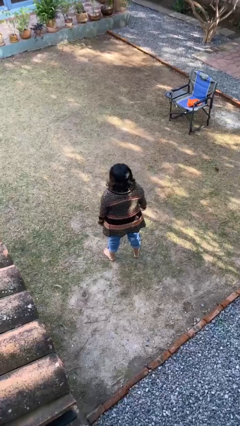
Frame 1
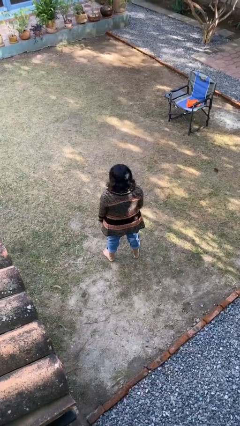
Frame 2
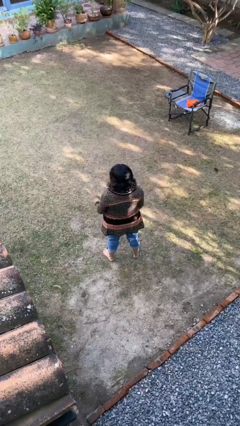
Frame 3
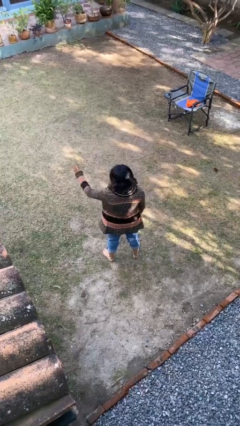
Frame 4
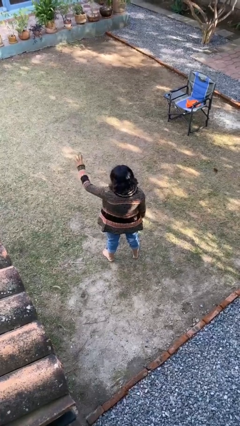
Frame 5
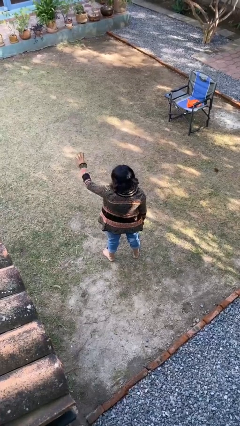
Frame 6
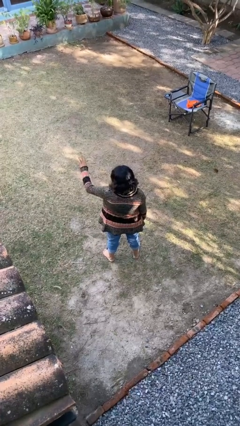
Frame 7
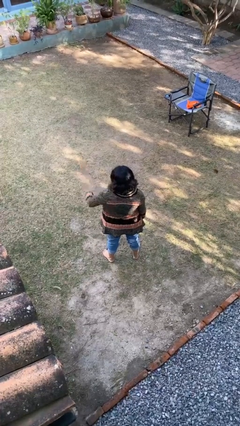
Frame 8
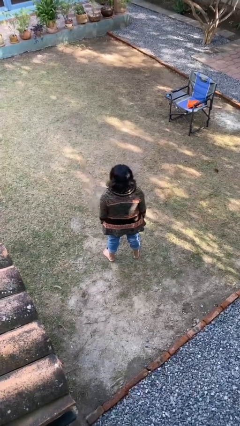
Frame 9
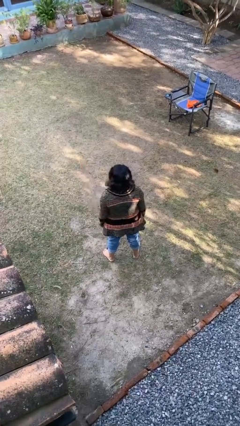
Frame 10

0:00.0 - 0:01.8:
person gestures number four

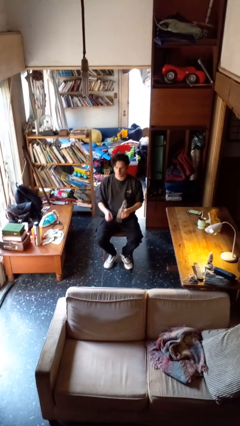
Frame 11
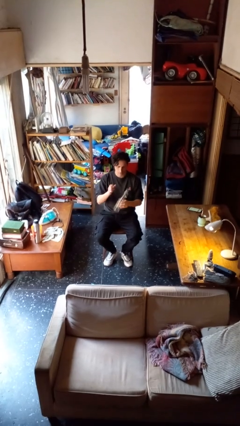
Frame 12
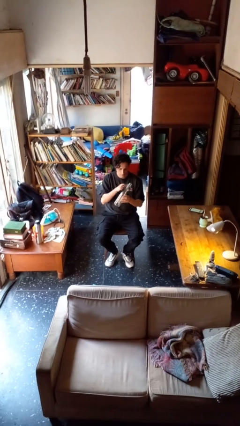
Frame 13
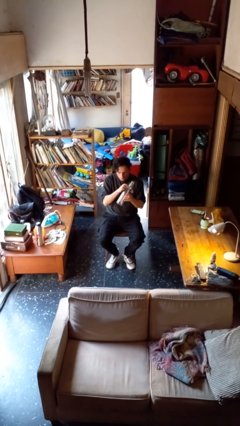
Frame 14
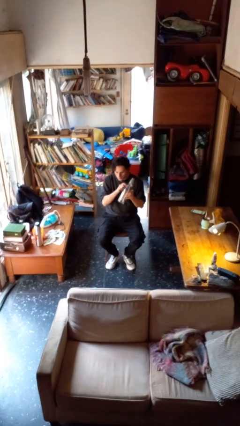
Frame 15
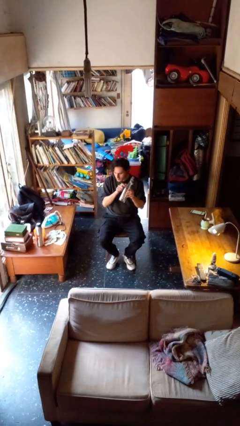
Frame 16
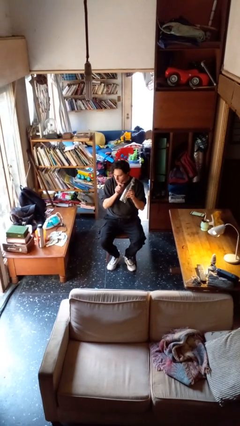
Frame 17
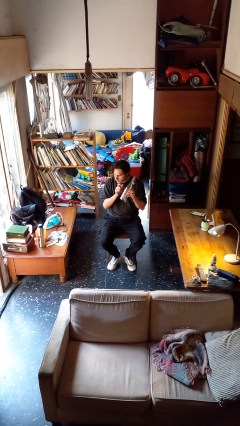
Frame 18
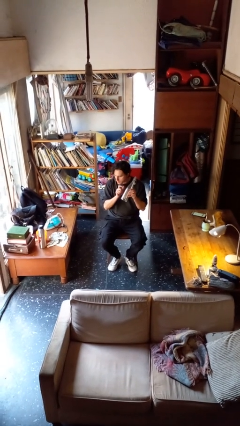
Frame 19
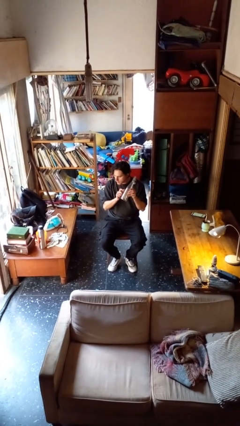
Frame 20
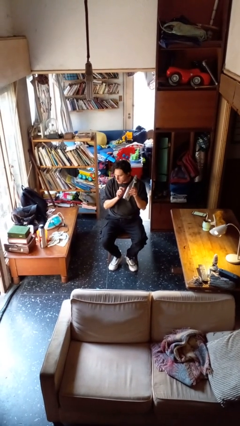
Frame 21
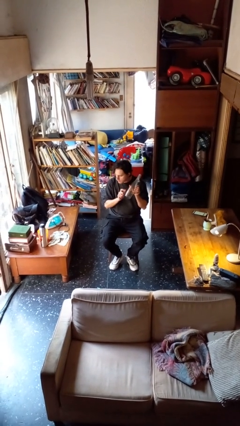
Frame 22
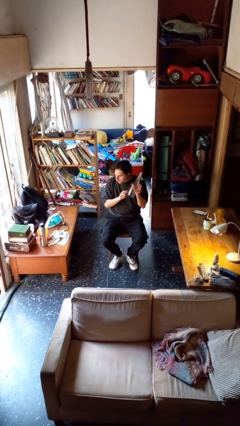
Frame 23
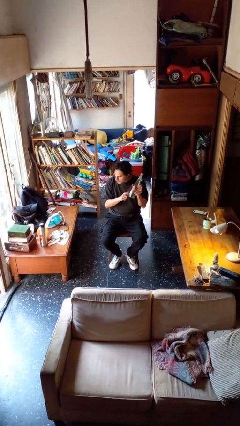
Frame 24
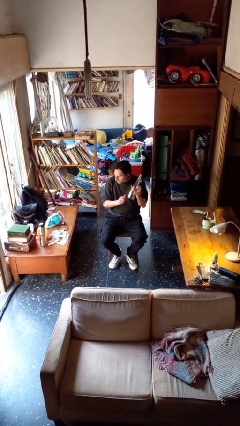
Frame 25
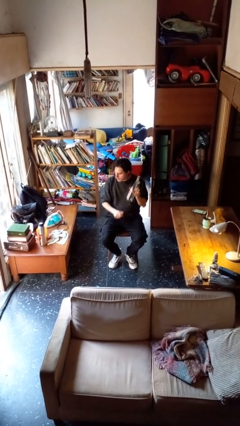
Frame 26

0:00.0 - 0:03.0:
person taps object with finger

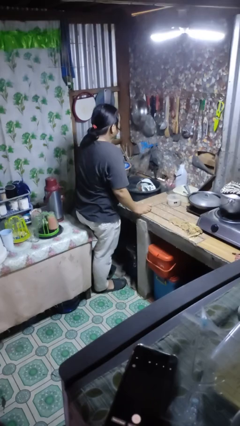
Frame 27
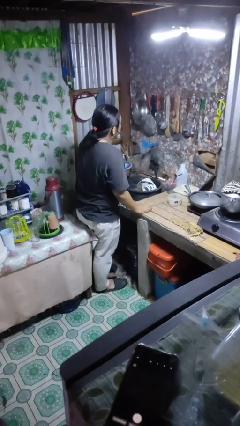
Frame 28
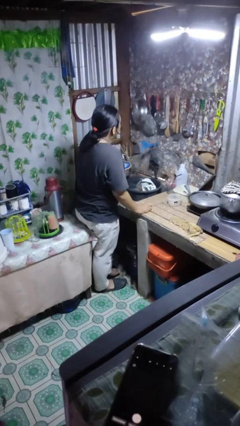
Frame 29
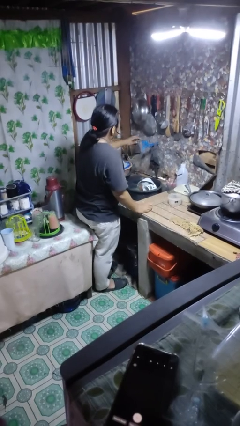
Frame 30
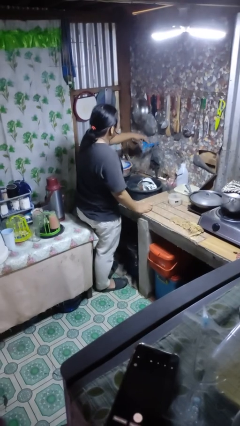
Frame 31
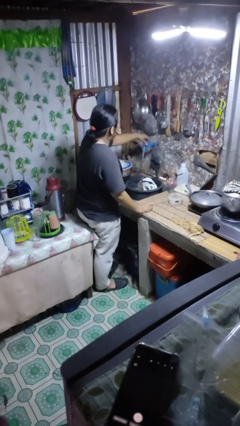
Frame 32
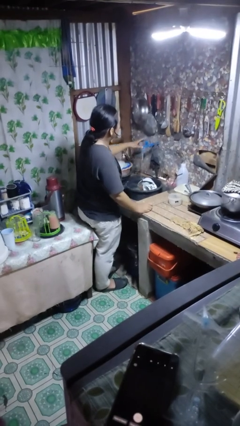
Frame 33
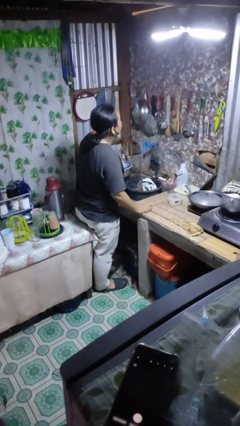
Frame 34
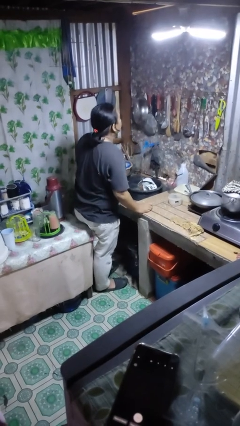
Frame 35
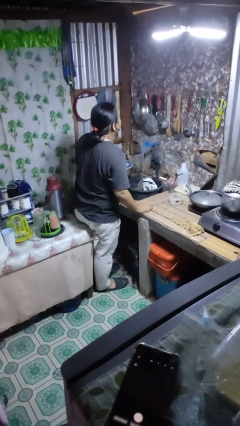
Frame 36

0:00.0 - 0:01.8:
person turns on faucet

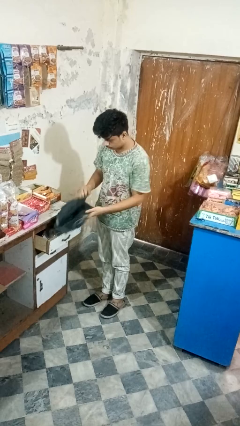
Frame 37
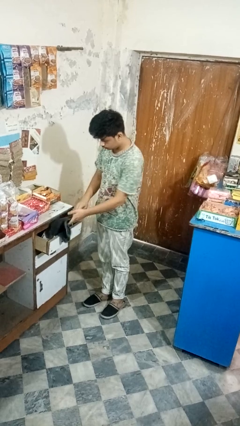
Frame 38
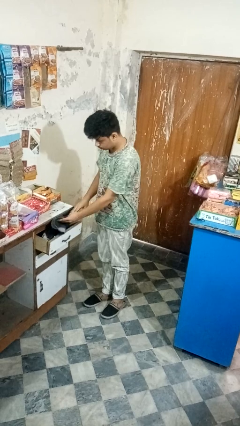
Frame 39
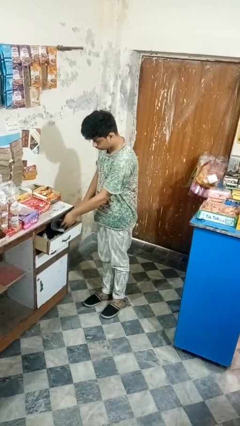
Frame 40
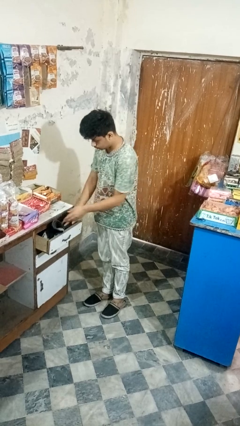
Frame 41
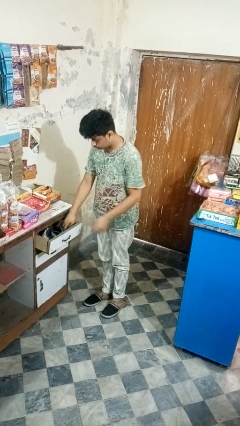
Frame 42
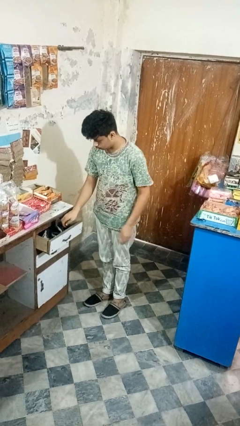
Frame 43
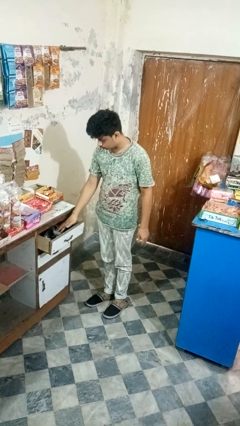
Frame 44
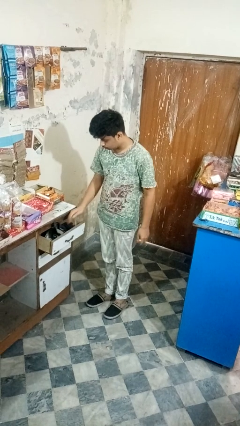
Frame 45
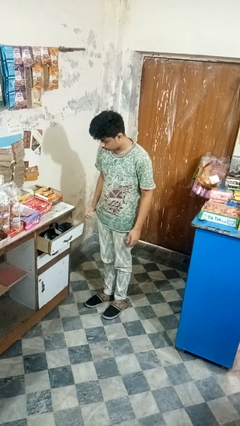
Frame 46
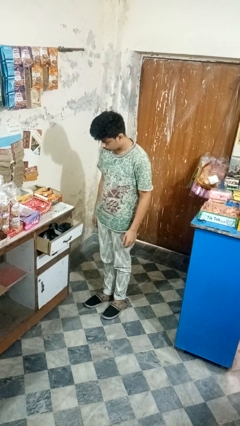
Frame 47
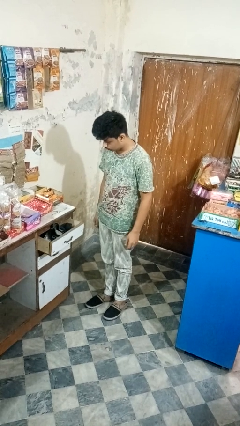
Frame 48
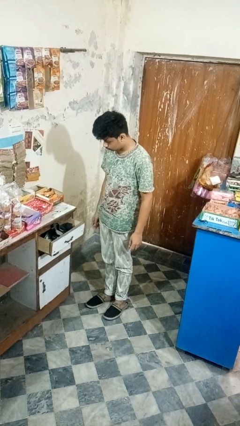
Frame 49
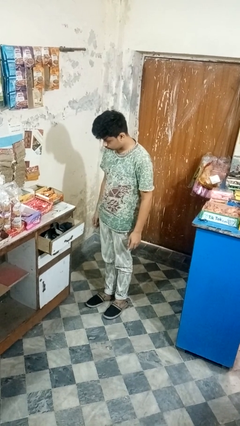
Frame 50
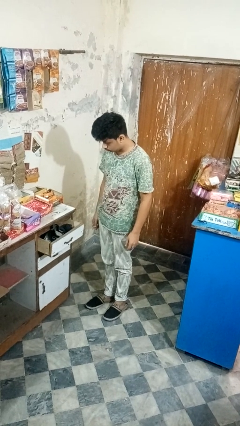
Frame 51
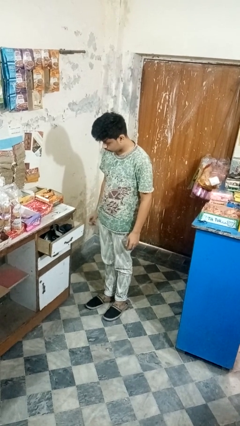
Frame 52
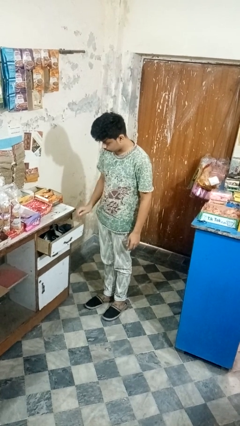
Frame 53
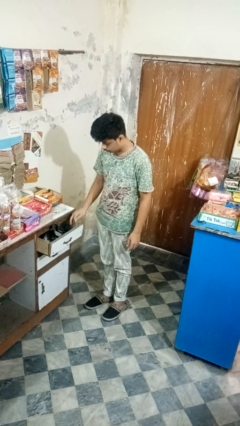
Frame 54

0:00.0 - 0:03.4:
person puts clothes into dresser

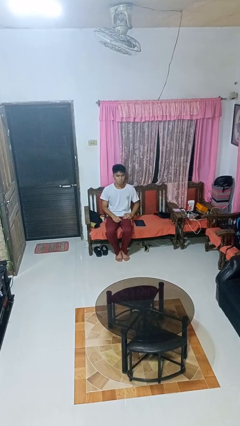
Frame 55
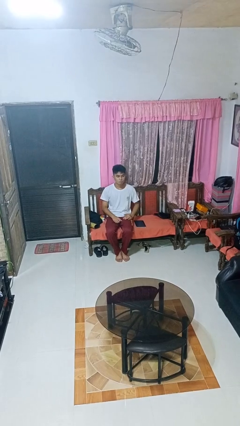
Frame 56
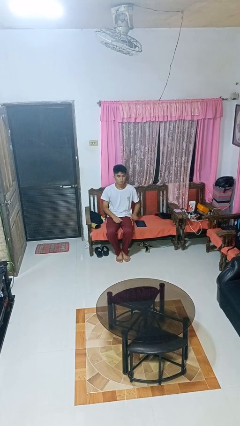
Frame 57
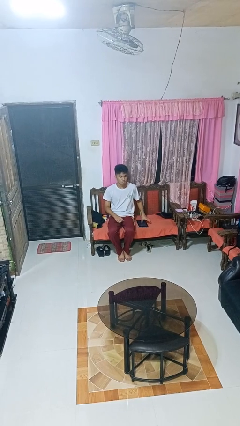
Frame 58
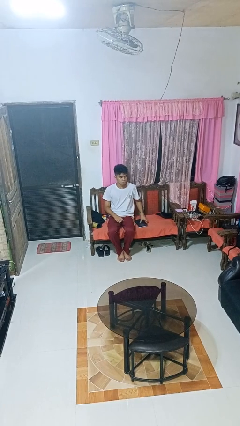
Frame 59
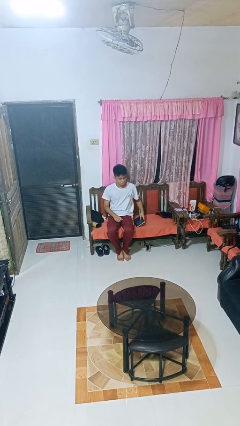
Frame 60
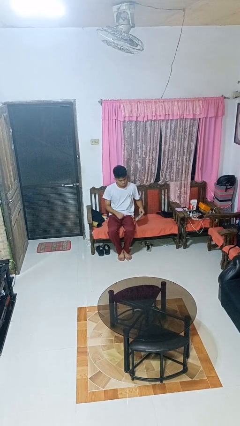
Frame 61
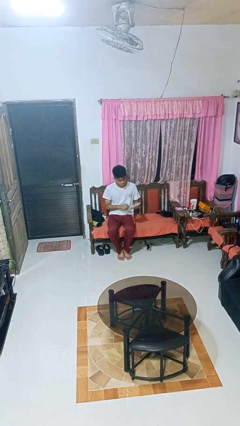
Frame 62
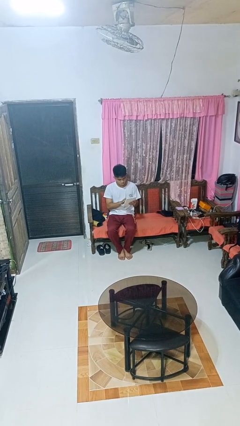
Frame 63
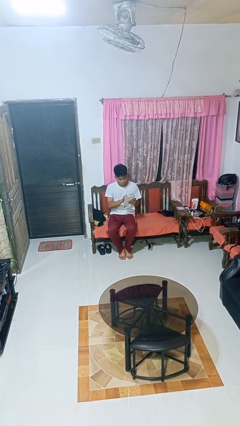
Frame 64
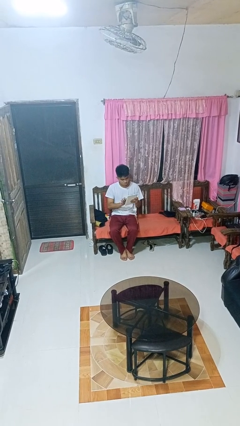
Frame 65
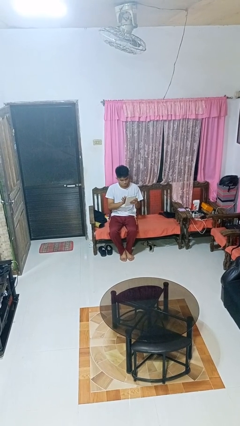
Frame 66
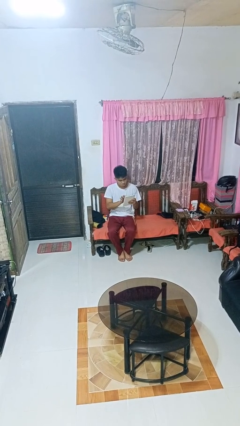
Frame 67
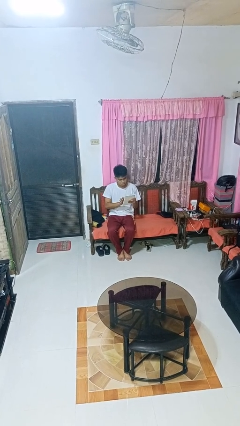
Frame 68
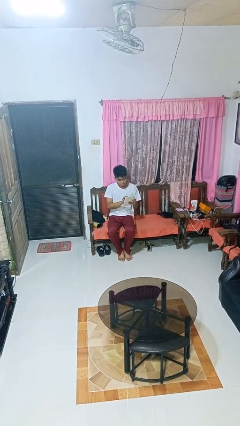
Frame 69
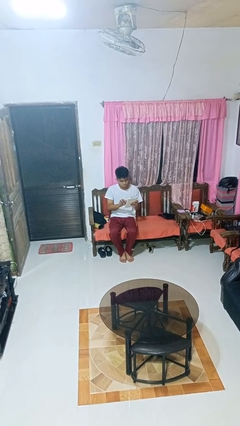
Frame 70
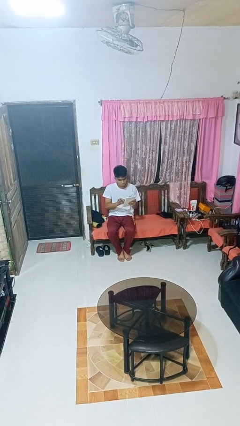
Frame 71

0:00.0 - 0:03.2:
person interacts with tablet

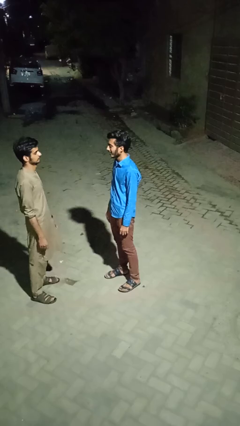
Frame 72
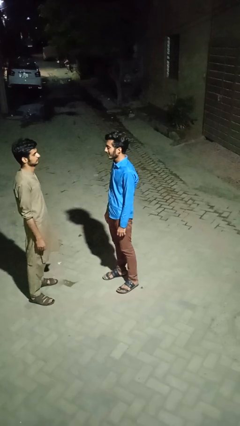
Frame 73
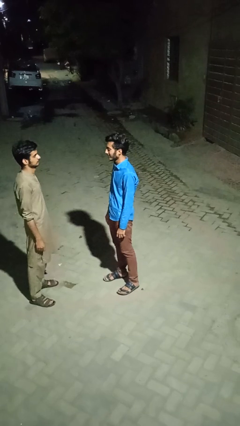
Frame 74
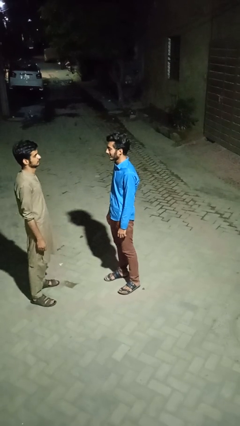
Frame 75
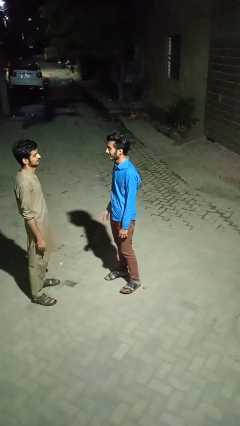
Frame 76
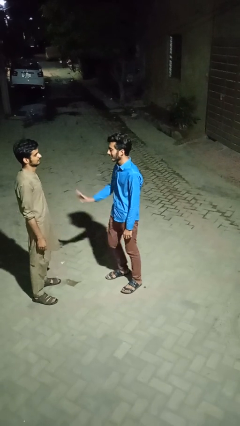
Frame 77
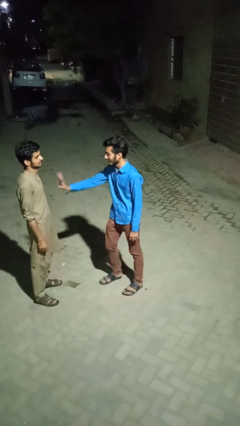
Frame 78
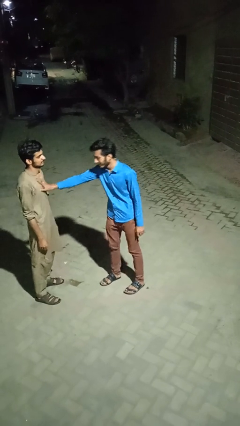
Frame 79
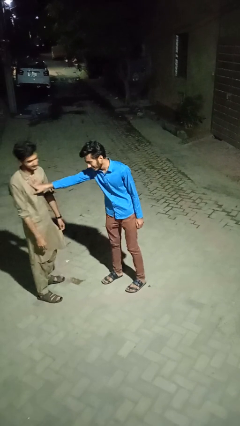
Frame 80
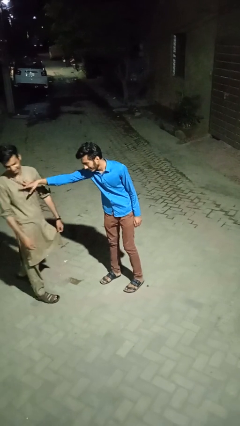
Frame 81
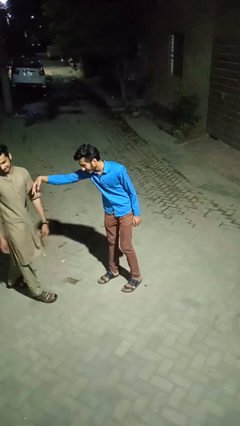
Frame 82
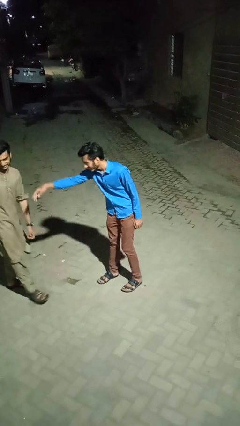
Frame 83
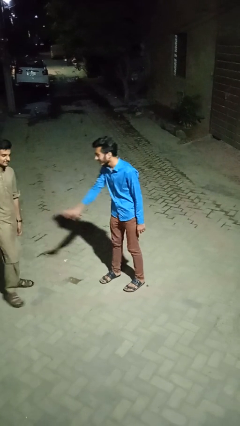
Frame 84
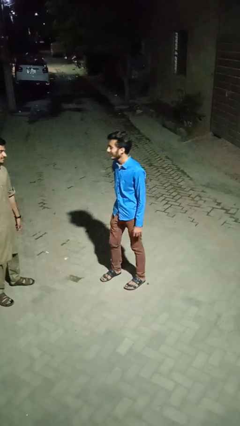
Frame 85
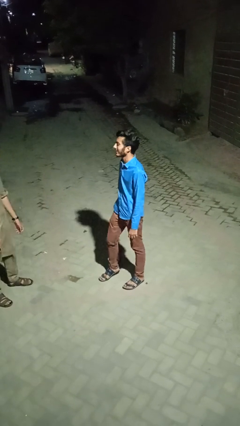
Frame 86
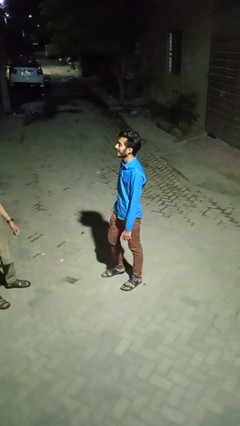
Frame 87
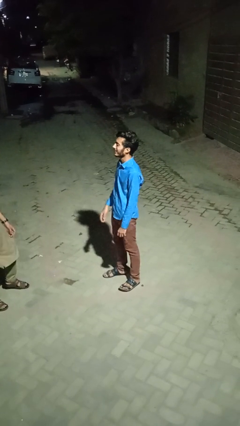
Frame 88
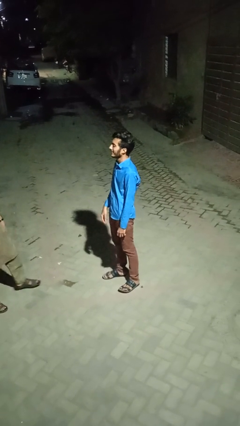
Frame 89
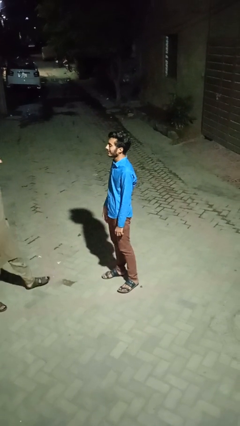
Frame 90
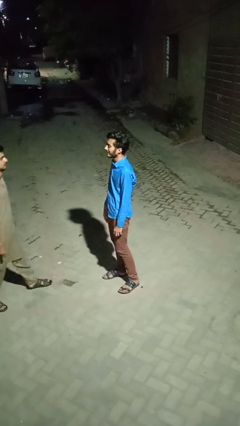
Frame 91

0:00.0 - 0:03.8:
person shoves person

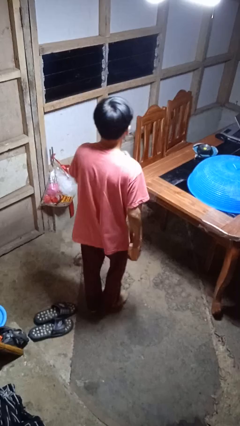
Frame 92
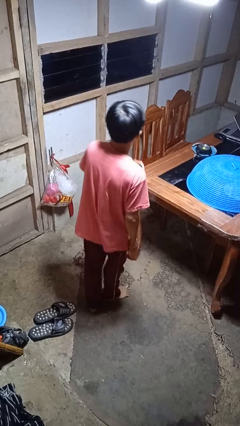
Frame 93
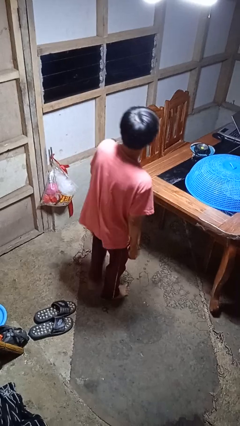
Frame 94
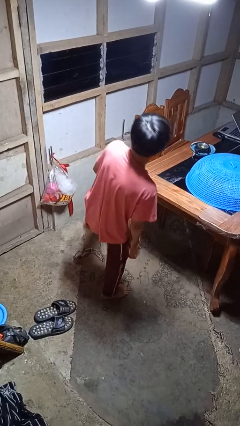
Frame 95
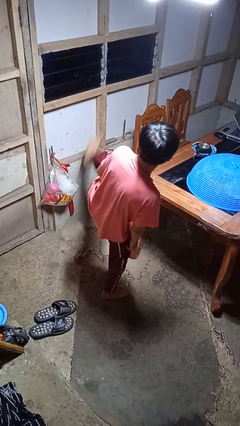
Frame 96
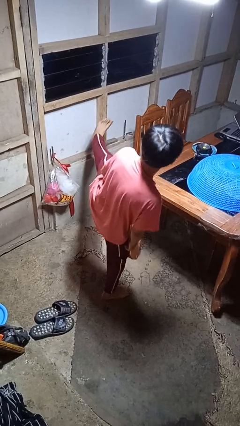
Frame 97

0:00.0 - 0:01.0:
person karate kicks
